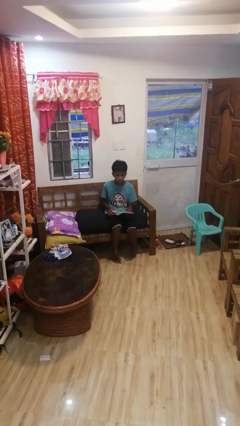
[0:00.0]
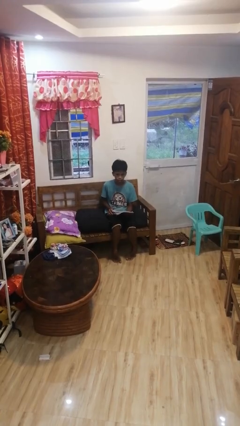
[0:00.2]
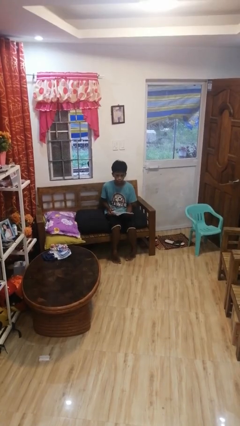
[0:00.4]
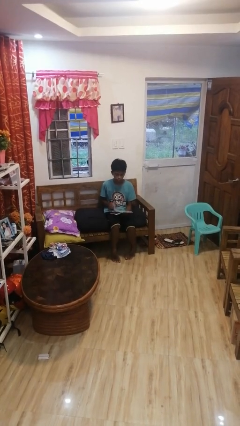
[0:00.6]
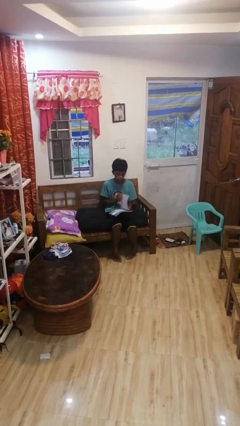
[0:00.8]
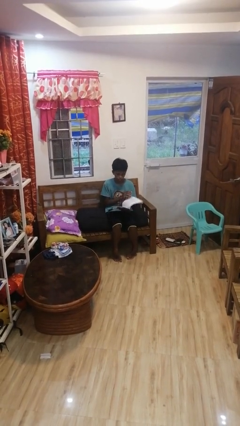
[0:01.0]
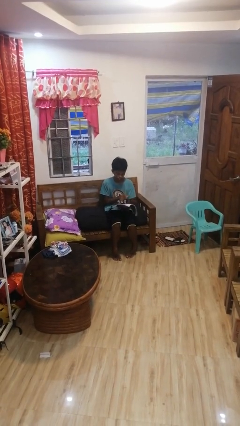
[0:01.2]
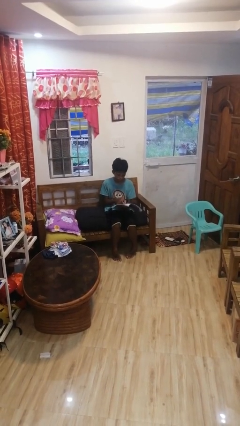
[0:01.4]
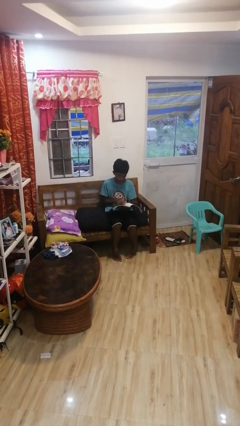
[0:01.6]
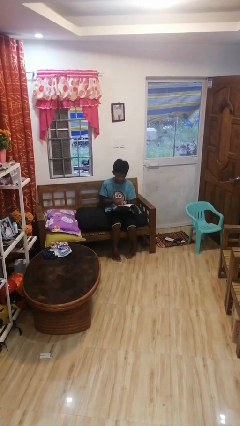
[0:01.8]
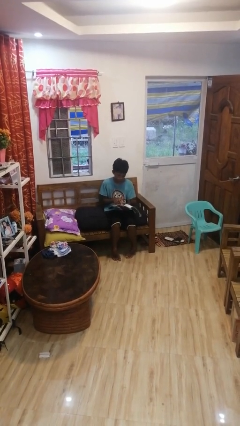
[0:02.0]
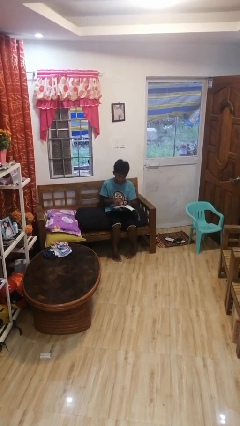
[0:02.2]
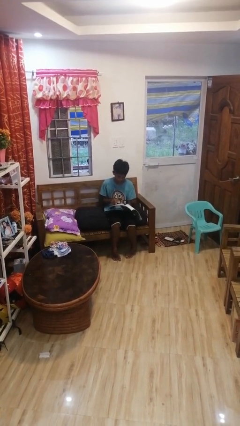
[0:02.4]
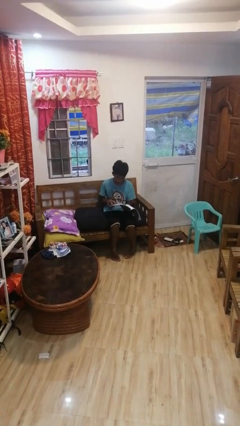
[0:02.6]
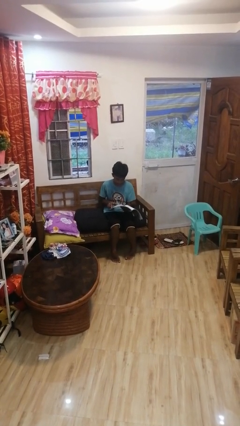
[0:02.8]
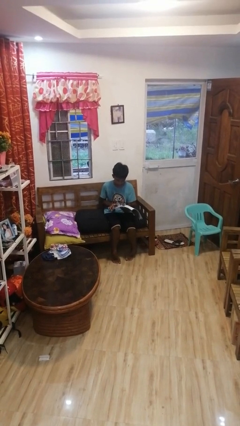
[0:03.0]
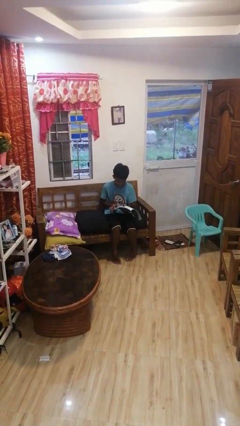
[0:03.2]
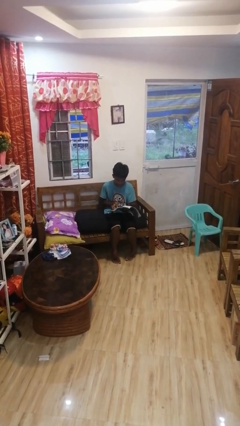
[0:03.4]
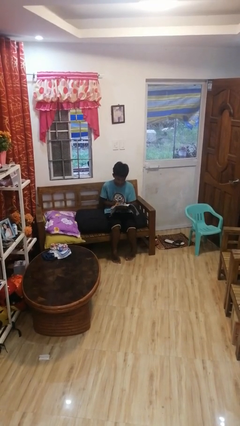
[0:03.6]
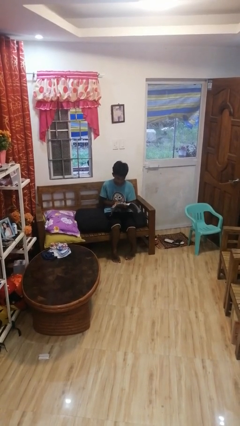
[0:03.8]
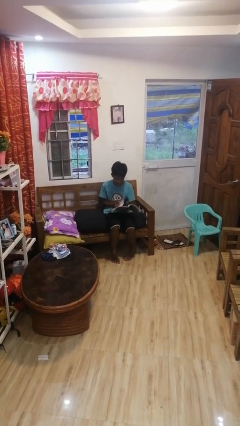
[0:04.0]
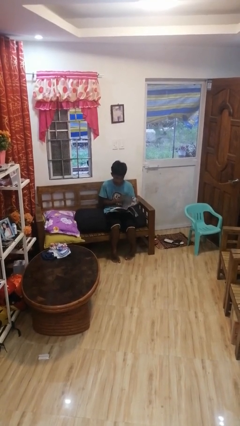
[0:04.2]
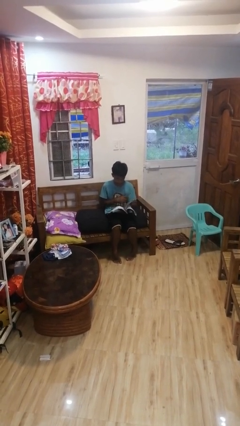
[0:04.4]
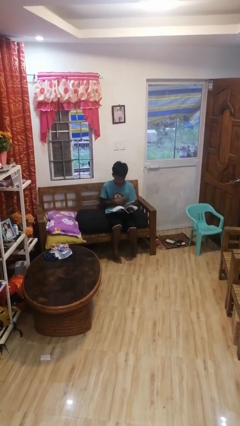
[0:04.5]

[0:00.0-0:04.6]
person reads magazine

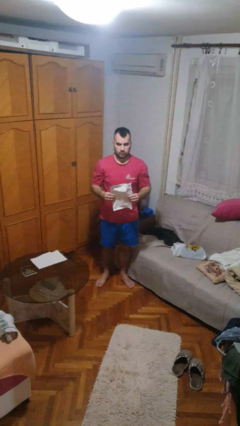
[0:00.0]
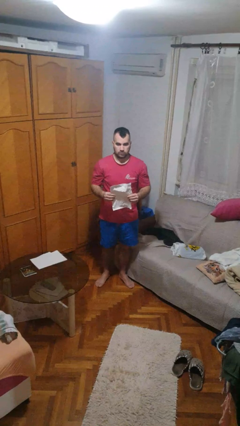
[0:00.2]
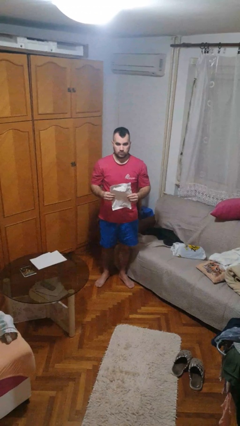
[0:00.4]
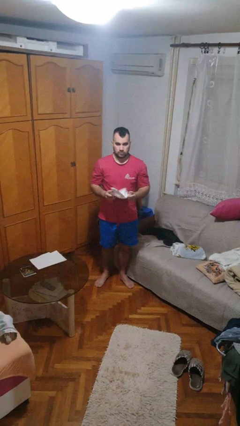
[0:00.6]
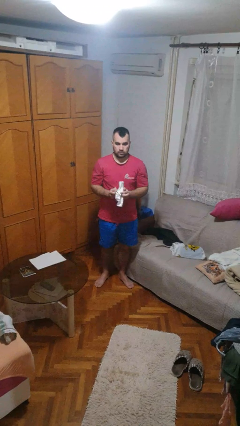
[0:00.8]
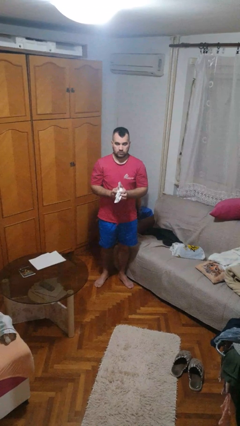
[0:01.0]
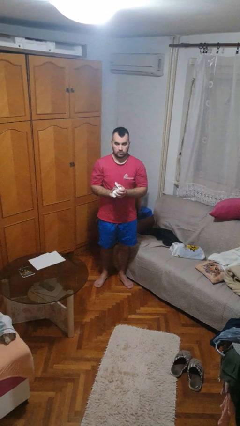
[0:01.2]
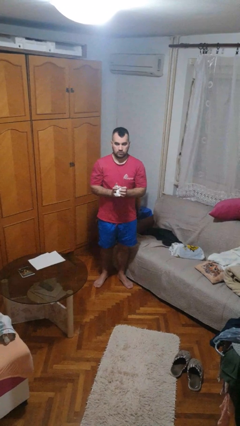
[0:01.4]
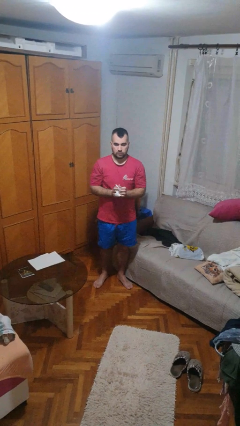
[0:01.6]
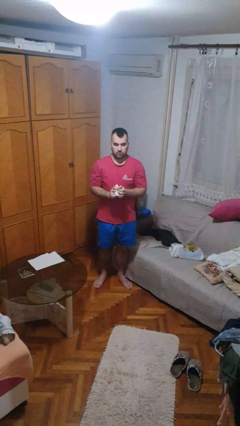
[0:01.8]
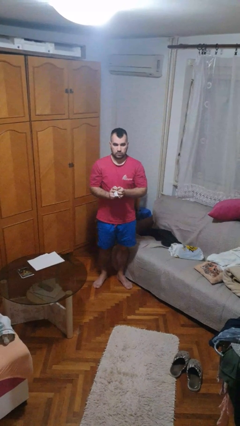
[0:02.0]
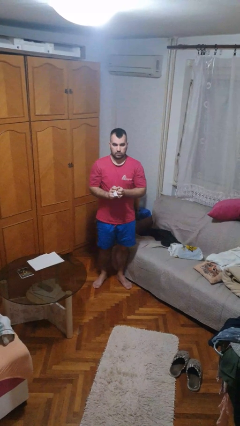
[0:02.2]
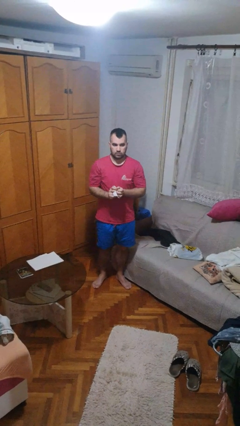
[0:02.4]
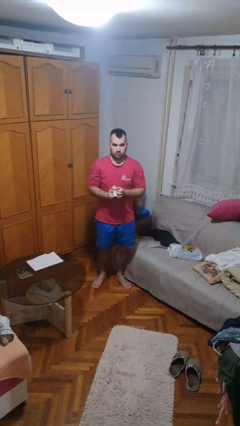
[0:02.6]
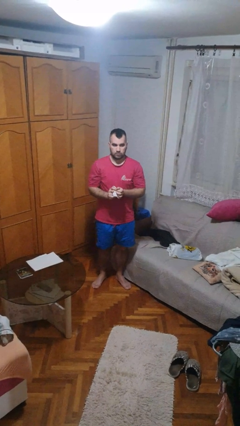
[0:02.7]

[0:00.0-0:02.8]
person crumples paper

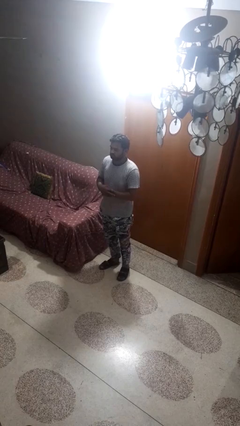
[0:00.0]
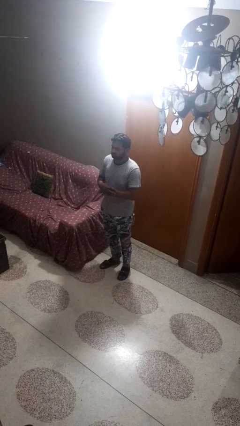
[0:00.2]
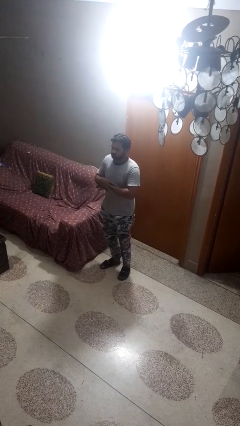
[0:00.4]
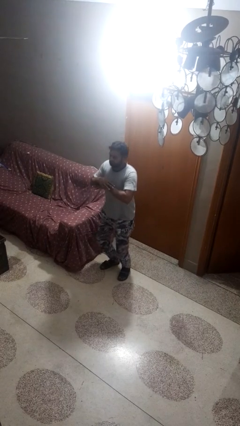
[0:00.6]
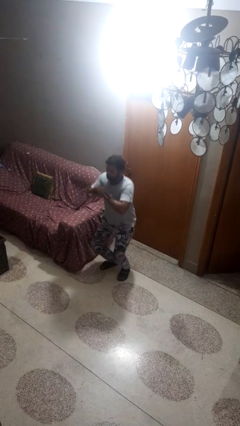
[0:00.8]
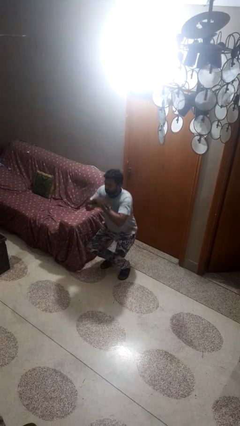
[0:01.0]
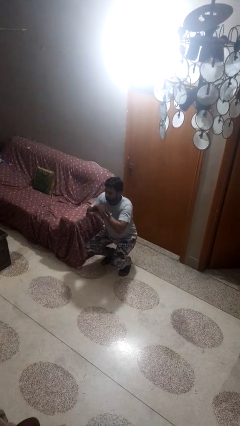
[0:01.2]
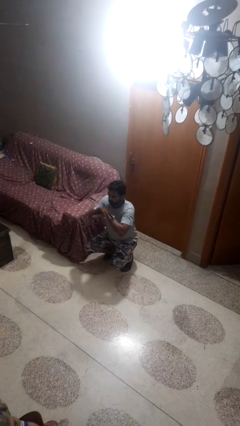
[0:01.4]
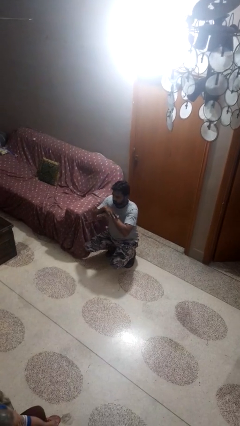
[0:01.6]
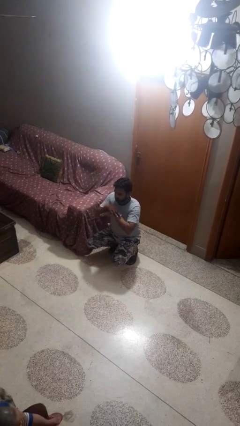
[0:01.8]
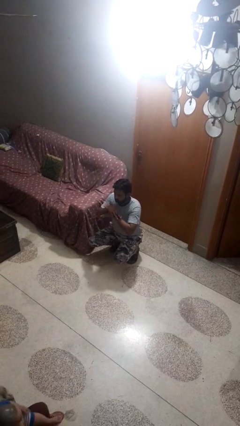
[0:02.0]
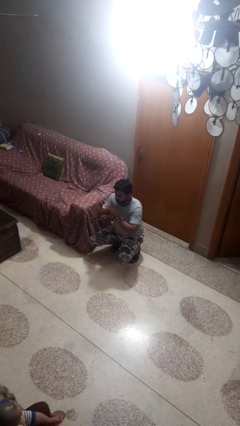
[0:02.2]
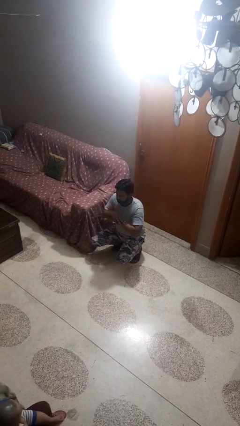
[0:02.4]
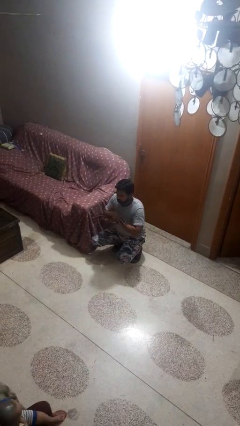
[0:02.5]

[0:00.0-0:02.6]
person squats

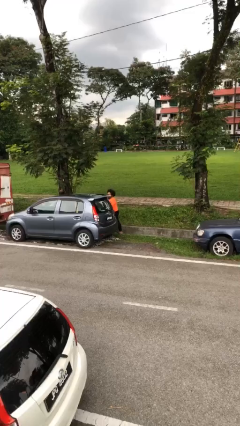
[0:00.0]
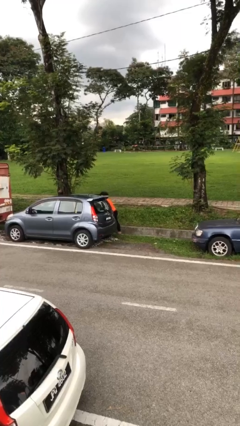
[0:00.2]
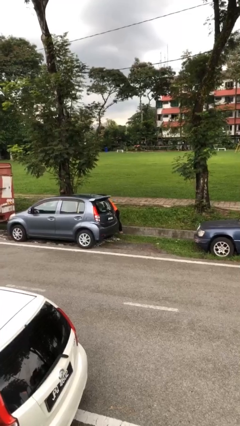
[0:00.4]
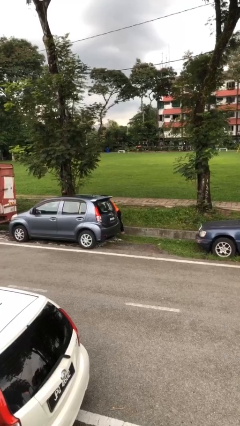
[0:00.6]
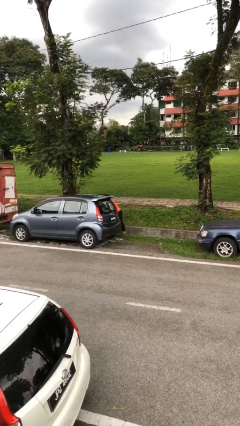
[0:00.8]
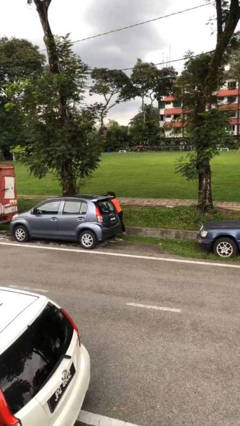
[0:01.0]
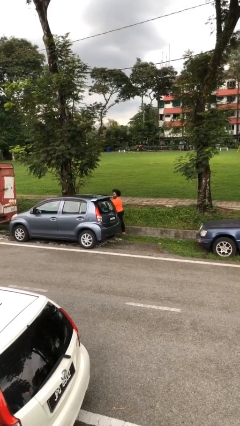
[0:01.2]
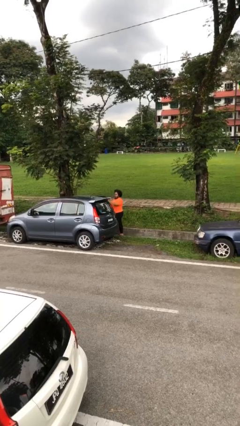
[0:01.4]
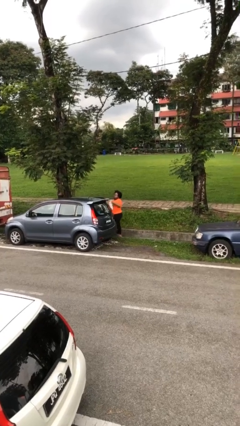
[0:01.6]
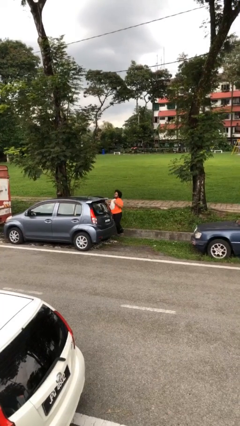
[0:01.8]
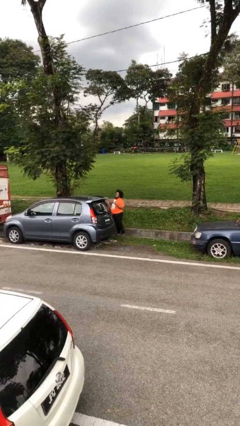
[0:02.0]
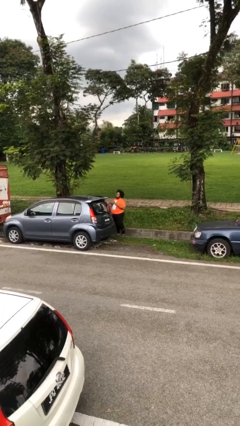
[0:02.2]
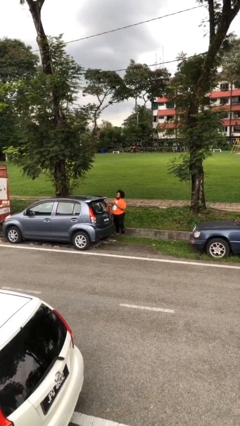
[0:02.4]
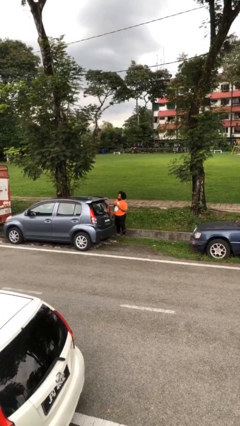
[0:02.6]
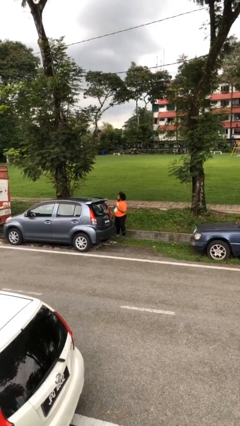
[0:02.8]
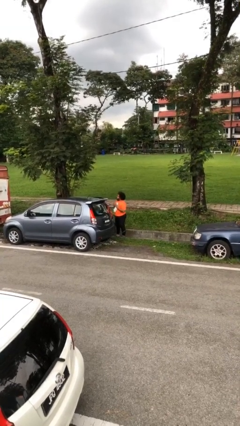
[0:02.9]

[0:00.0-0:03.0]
person unloads car

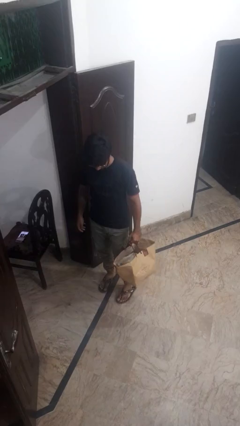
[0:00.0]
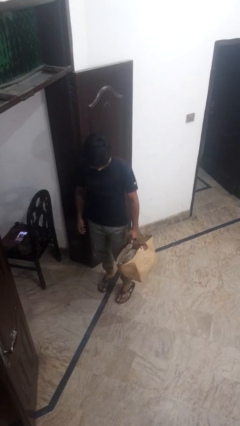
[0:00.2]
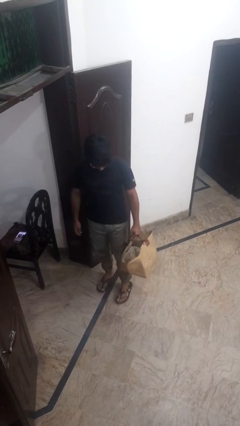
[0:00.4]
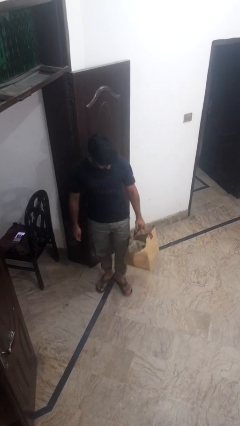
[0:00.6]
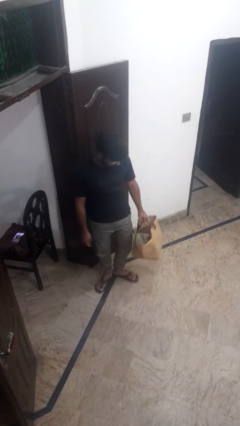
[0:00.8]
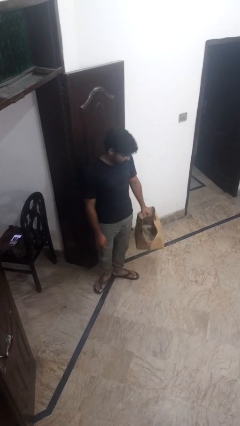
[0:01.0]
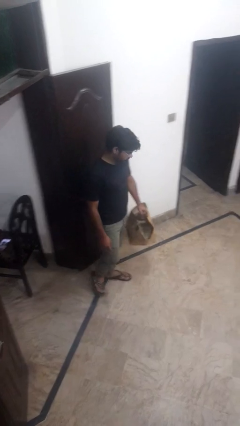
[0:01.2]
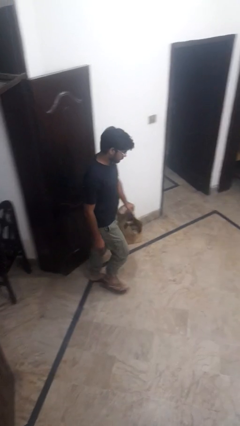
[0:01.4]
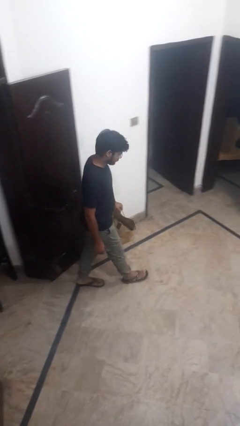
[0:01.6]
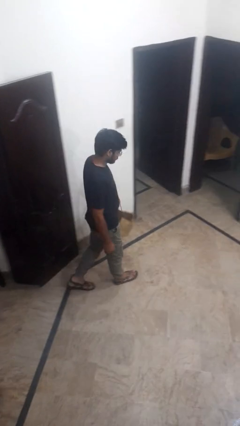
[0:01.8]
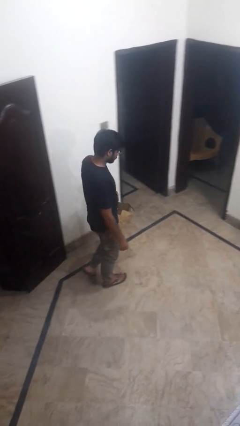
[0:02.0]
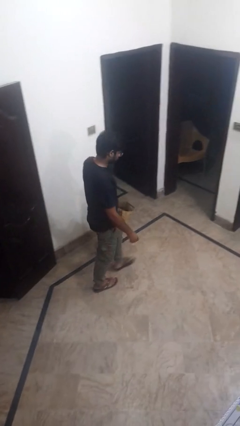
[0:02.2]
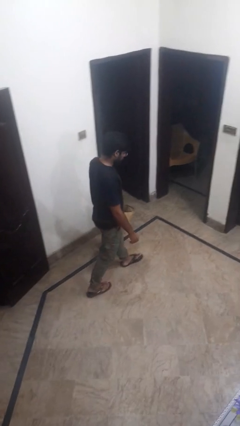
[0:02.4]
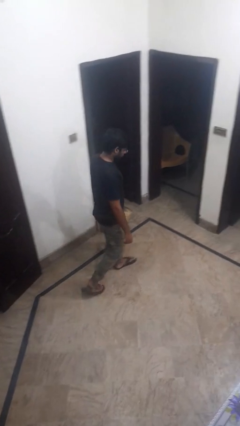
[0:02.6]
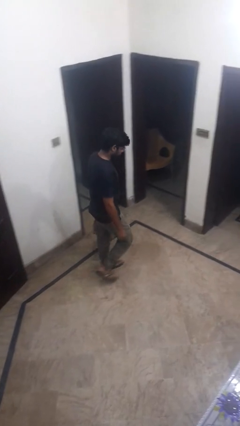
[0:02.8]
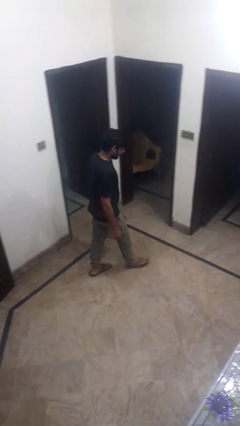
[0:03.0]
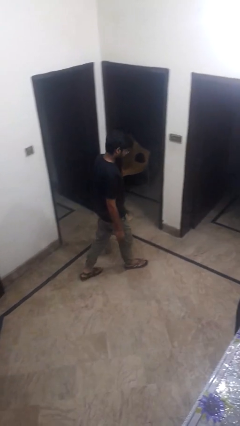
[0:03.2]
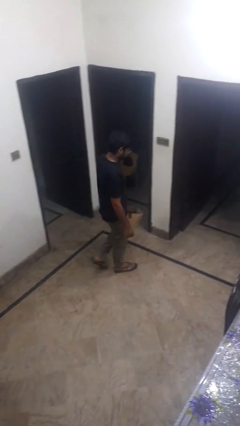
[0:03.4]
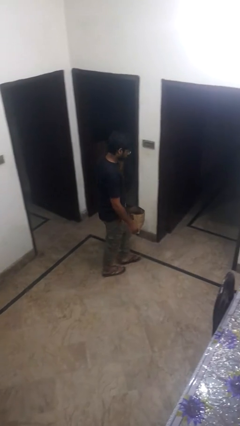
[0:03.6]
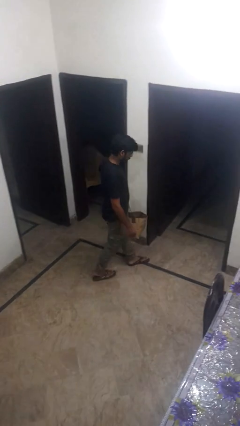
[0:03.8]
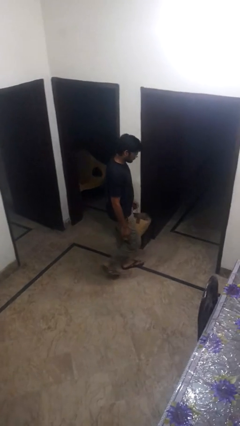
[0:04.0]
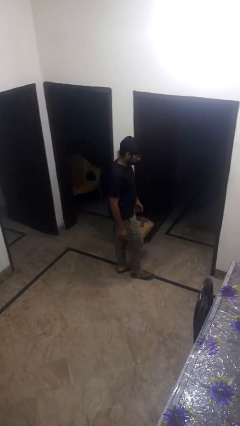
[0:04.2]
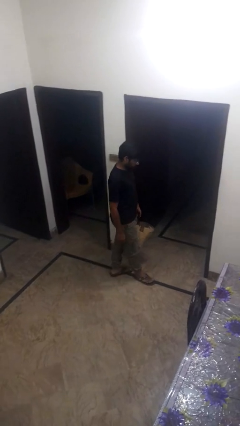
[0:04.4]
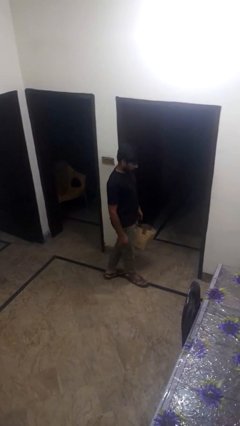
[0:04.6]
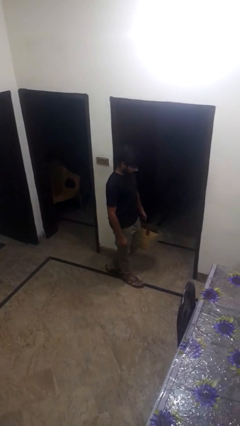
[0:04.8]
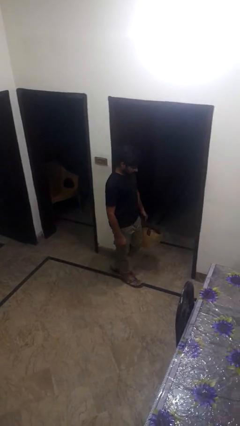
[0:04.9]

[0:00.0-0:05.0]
person carries groceries
